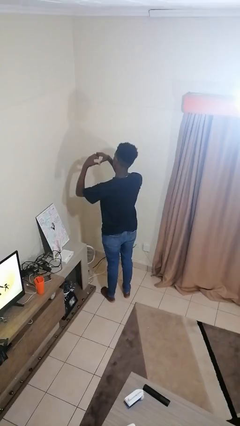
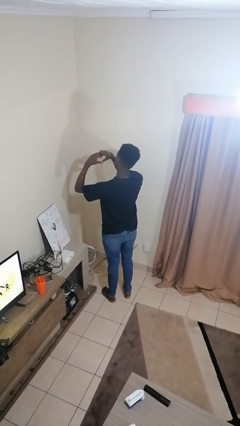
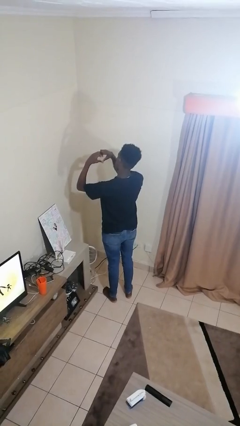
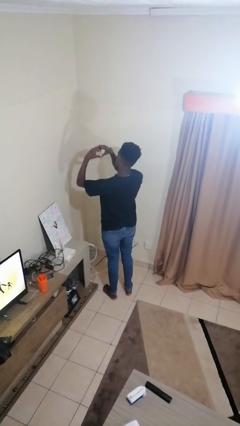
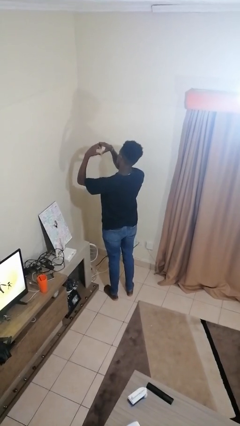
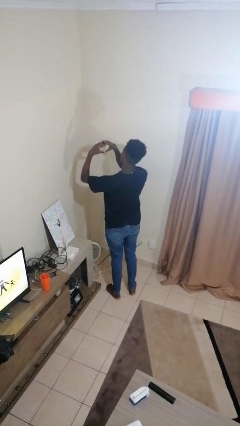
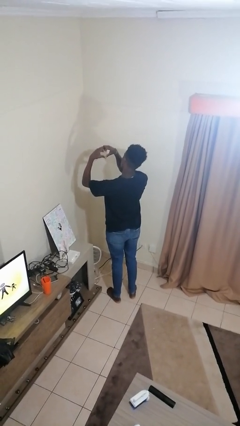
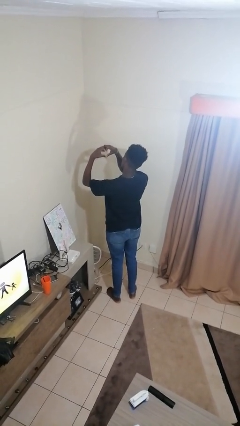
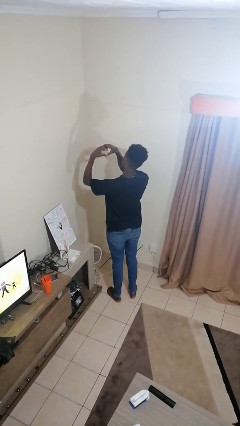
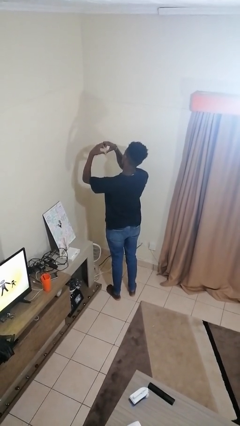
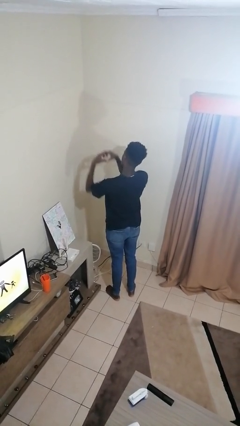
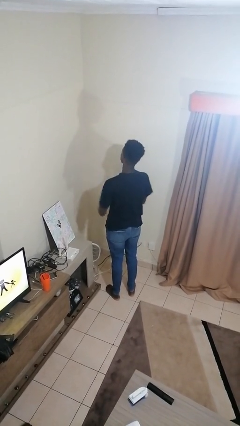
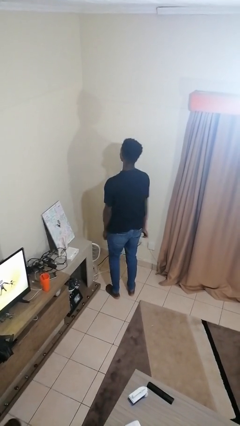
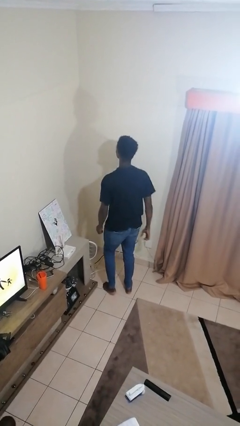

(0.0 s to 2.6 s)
person gestures heart

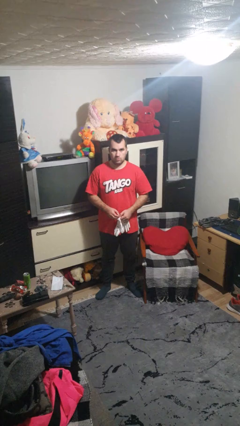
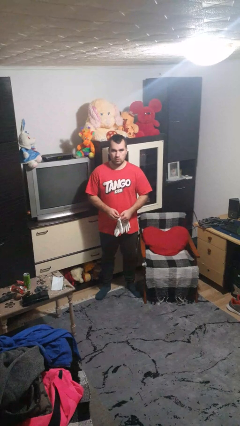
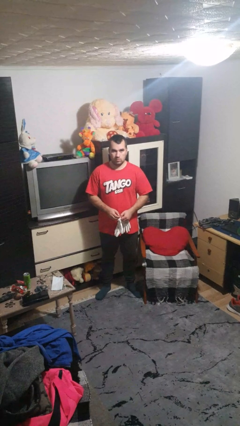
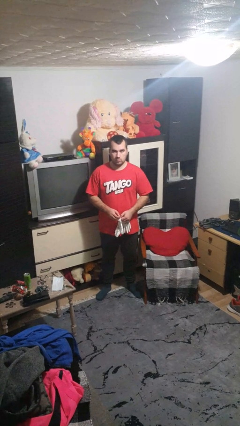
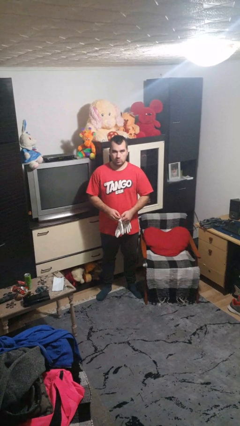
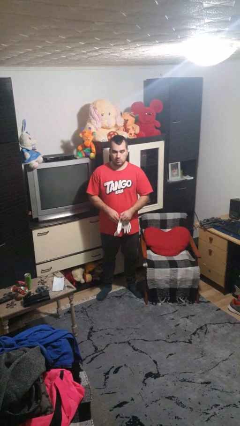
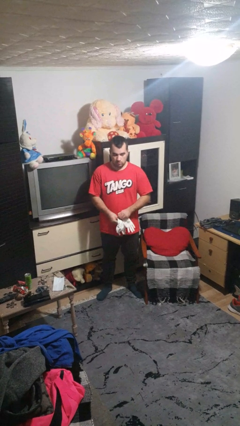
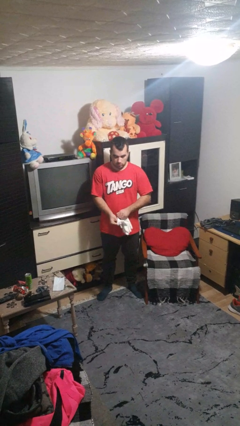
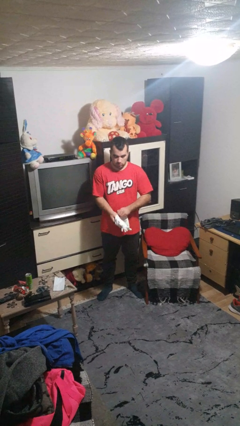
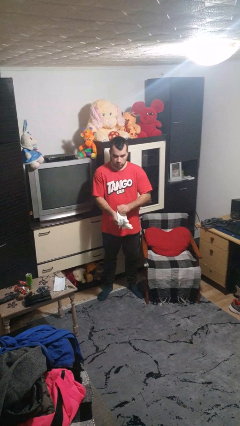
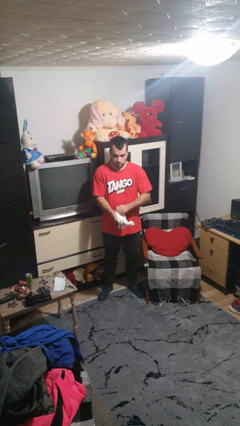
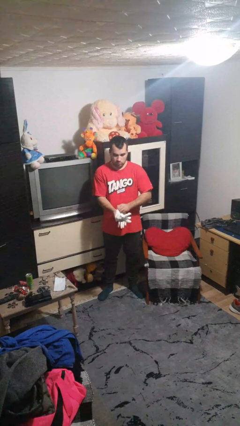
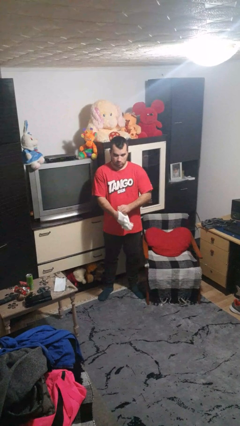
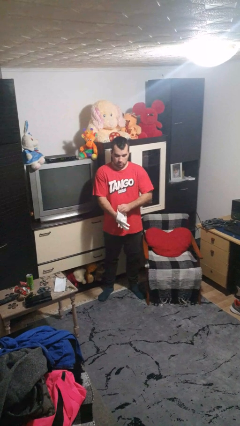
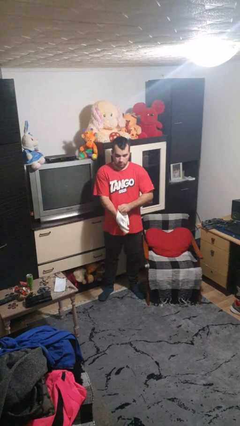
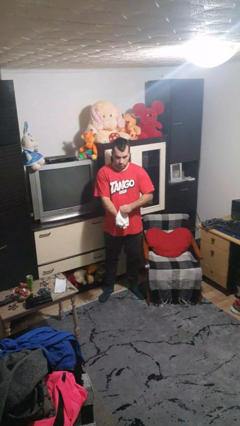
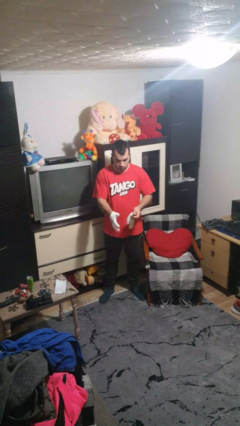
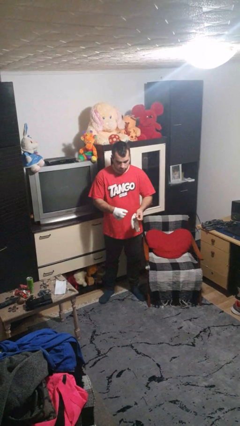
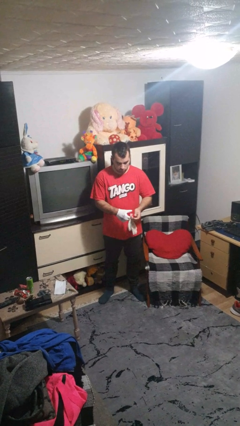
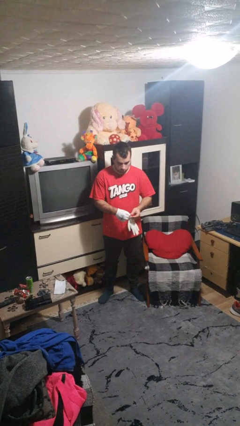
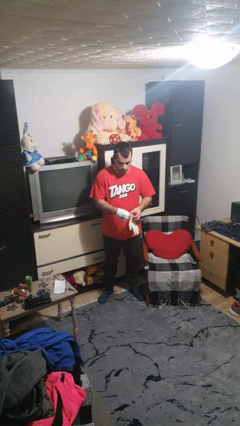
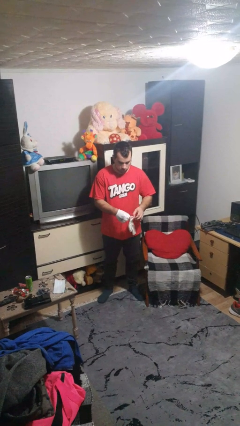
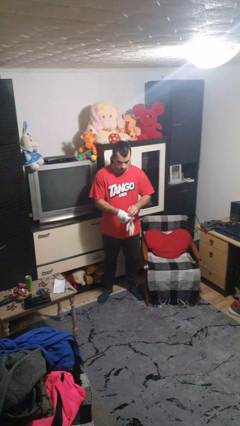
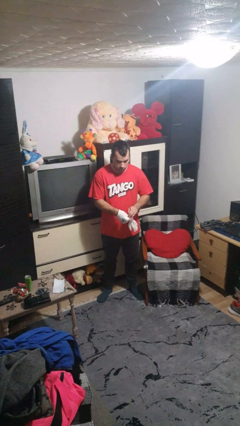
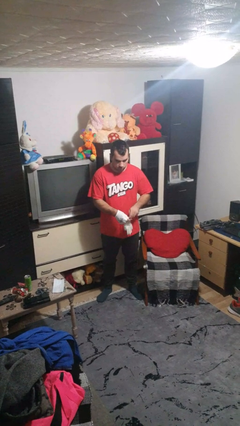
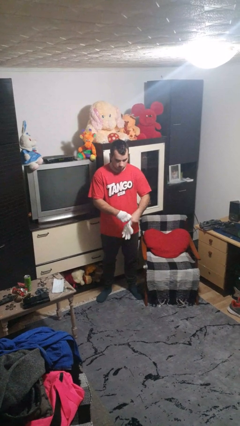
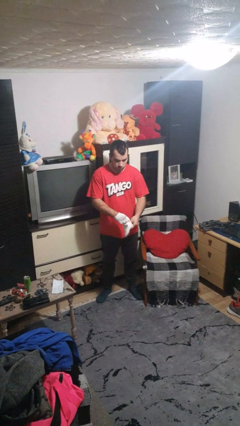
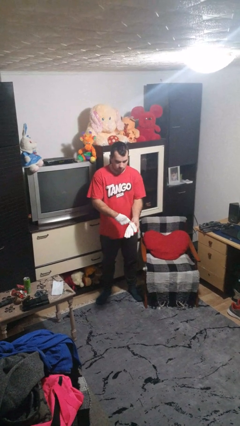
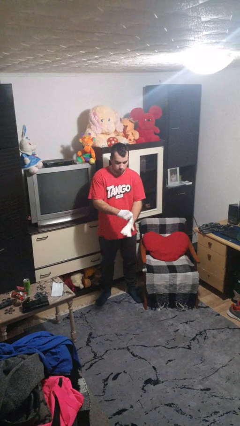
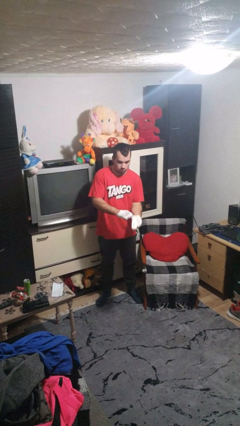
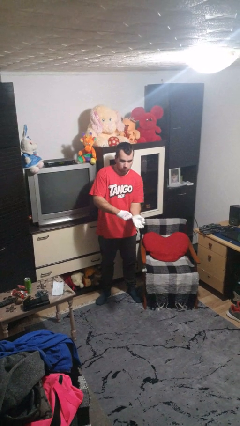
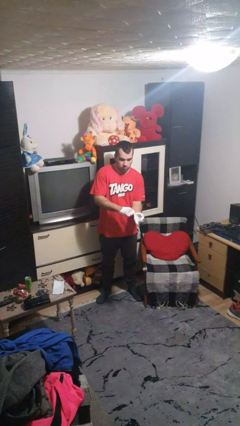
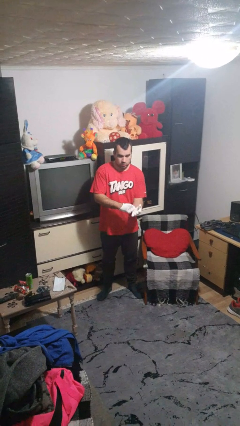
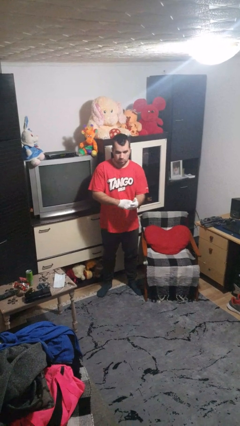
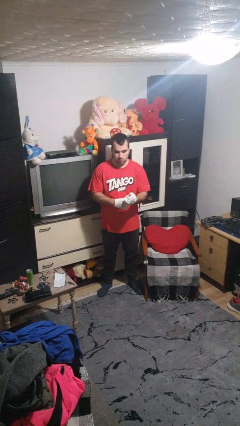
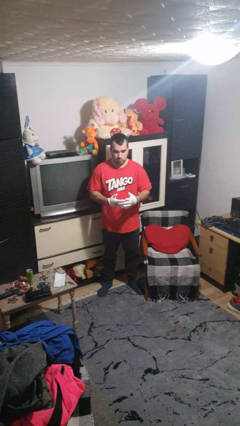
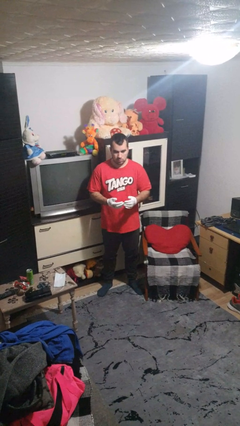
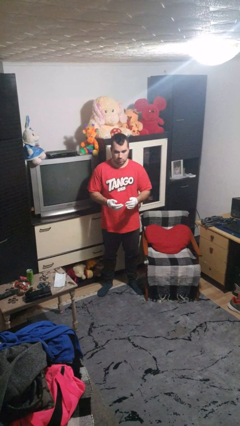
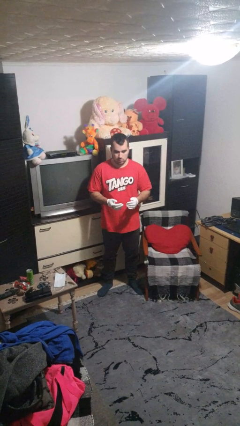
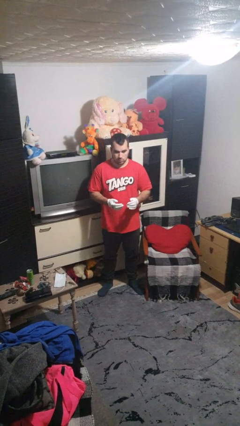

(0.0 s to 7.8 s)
person puts on gloves

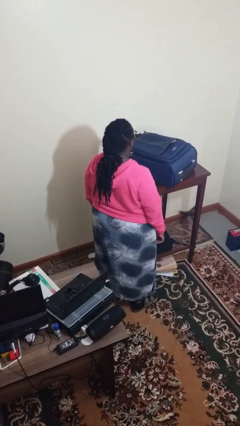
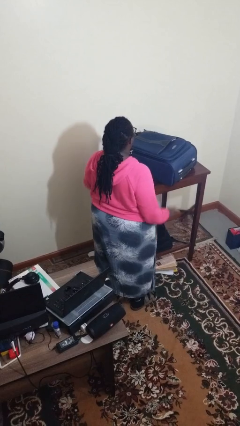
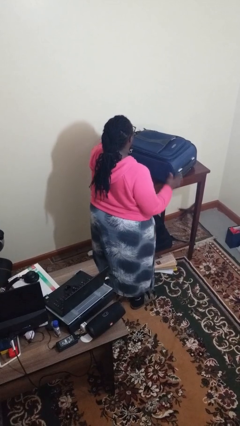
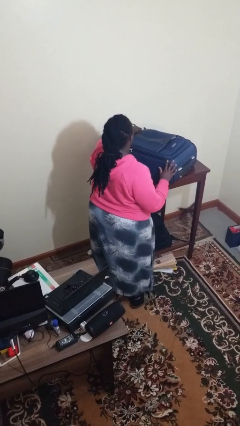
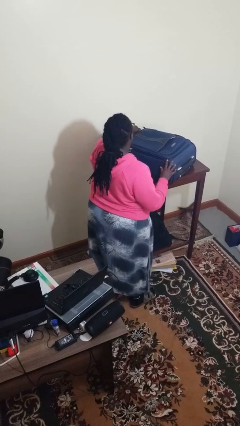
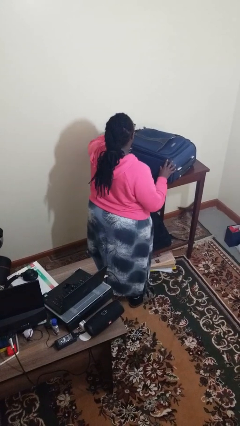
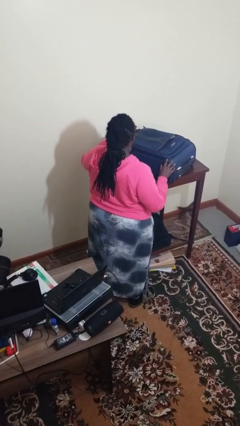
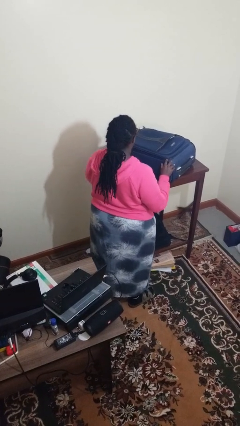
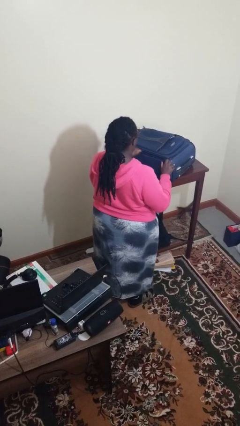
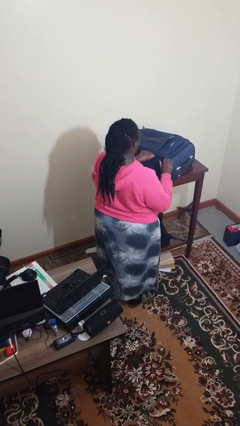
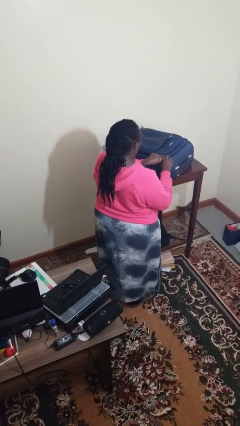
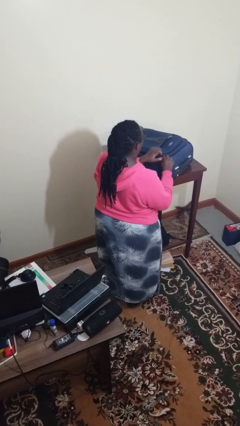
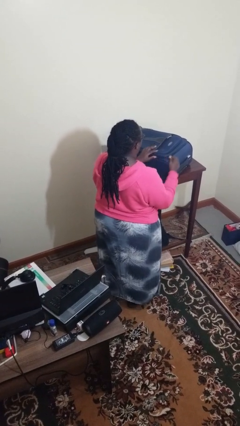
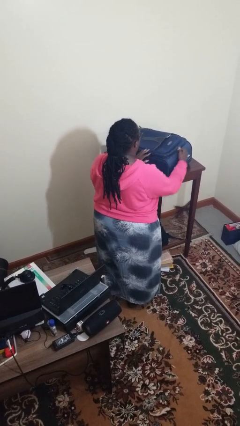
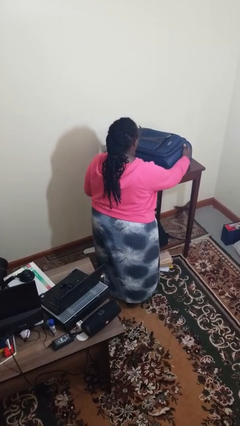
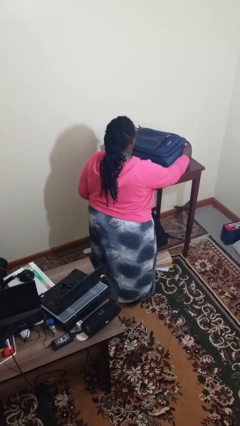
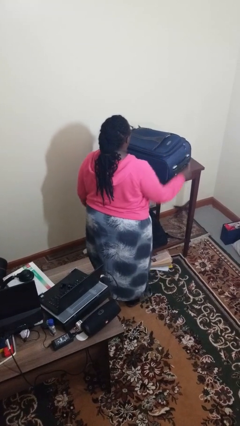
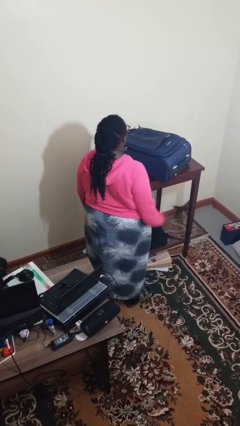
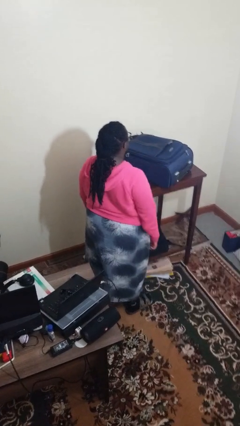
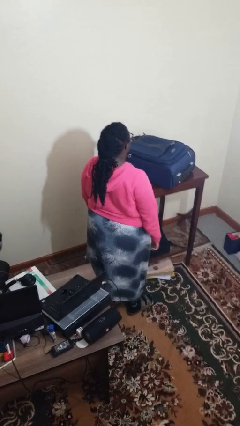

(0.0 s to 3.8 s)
person opens suitcase

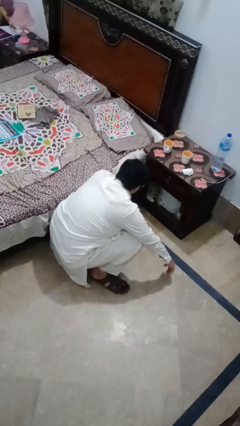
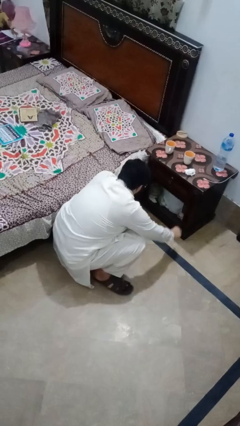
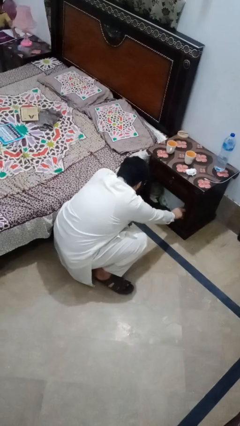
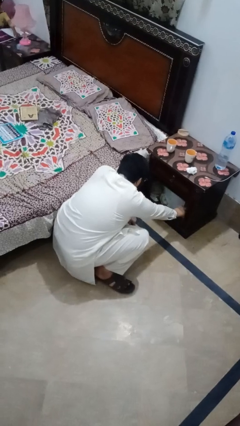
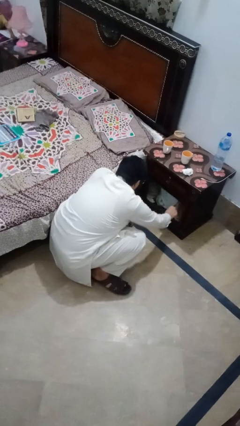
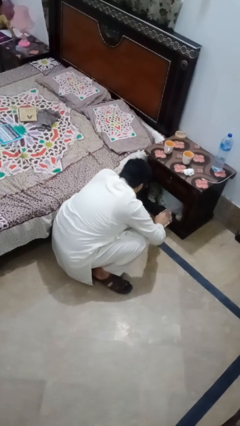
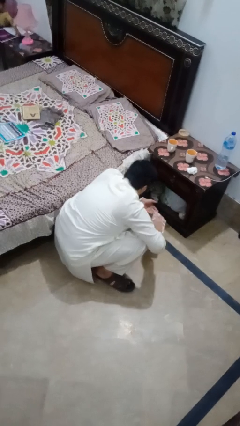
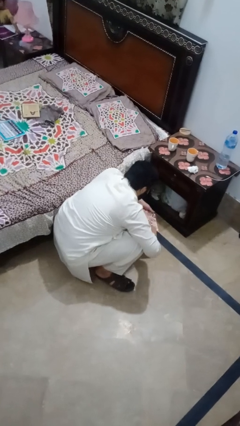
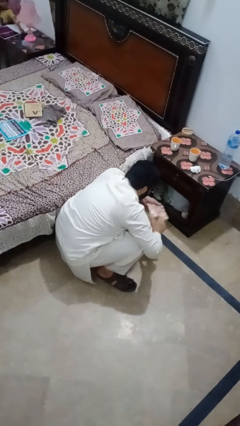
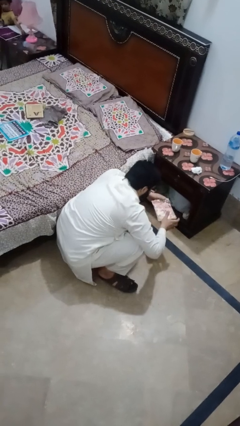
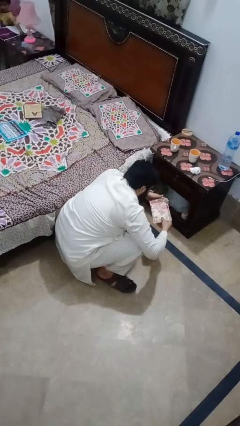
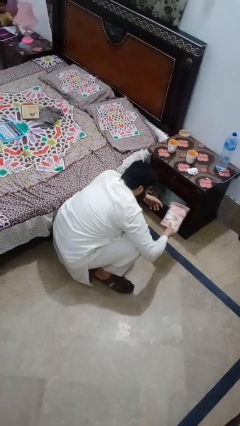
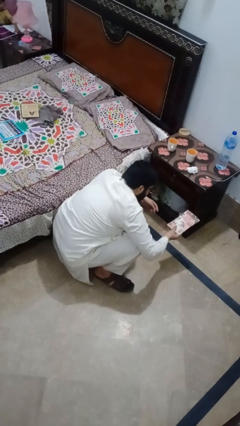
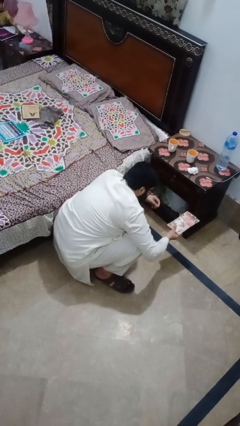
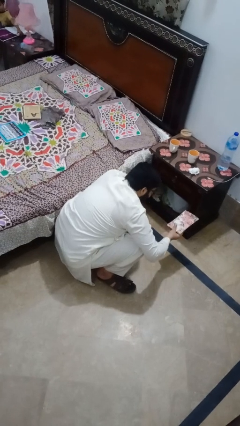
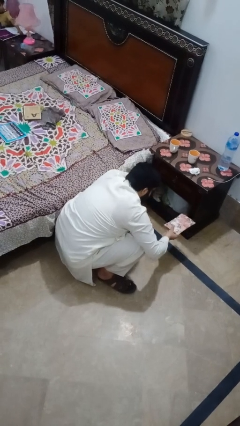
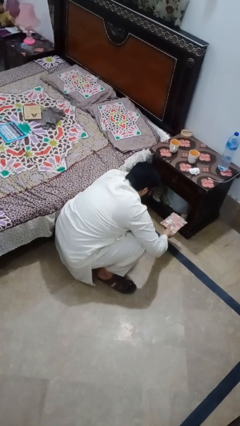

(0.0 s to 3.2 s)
person picks up object from cabinet
